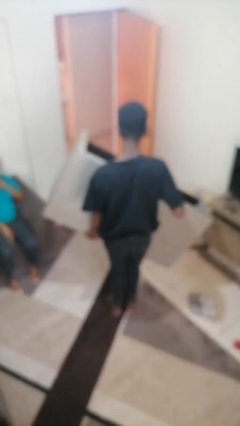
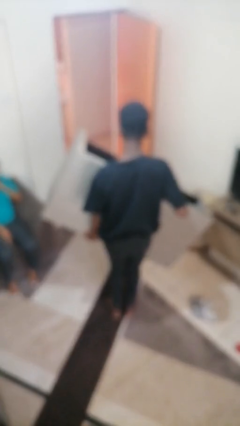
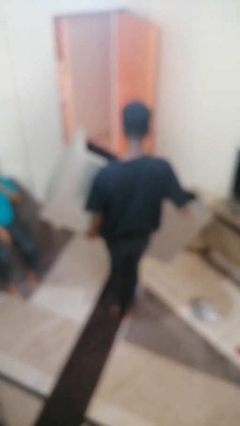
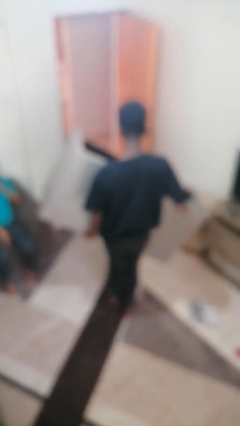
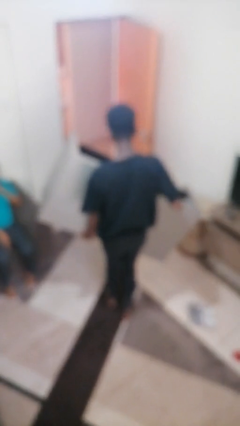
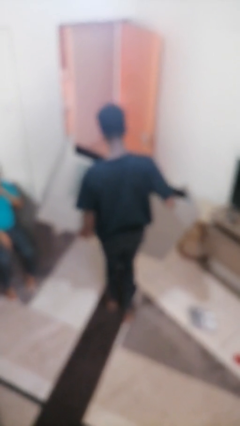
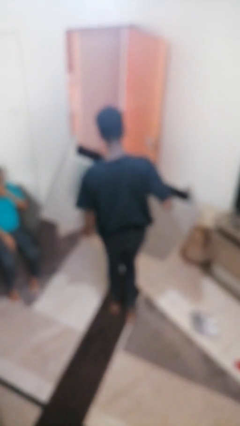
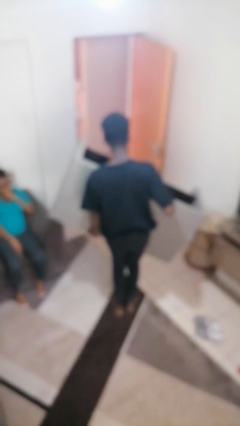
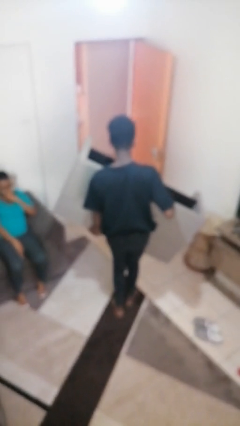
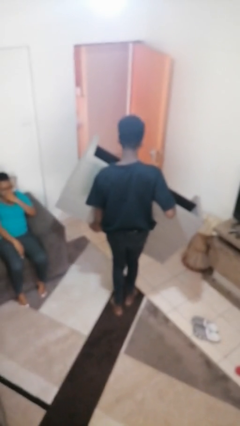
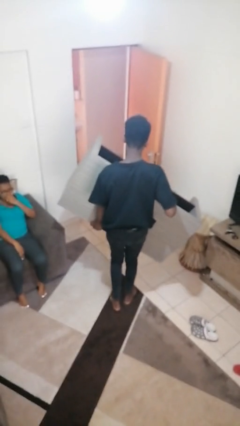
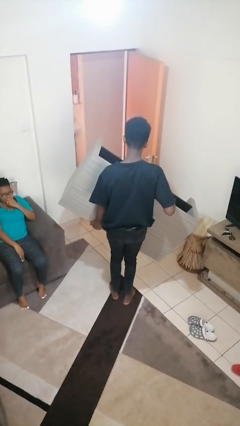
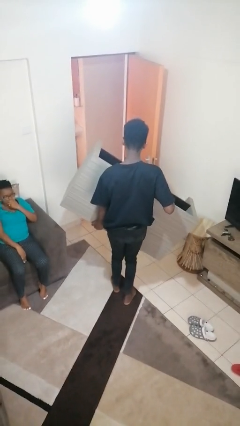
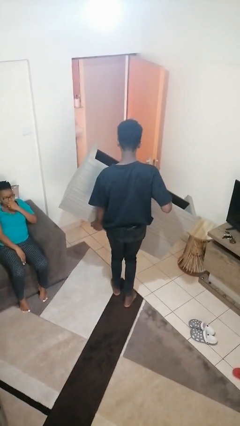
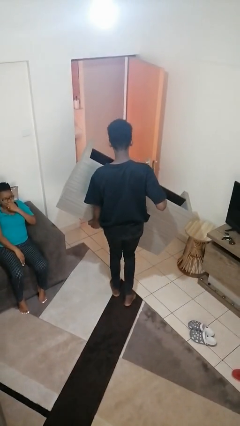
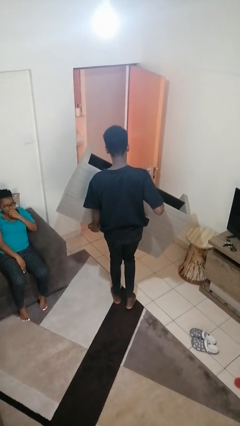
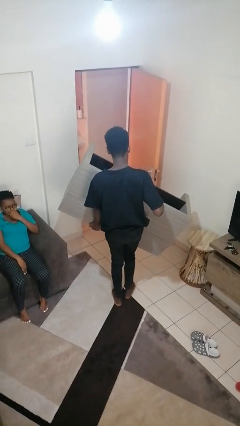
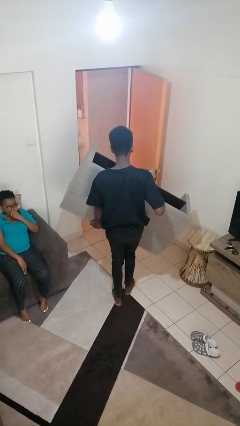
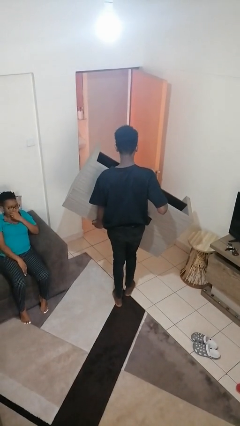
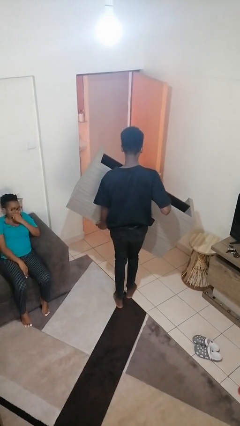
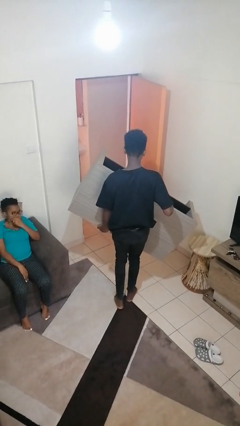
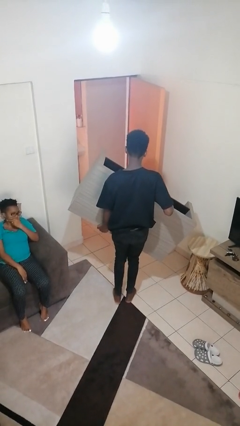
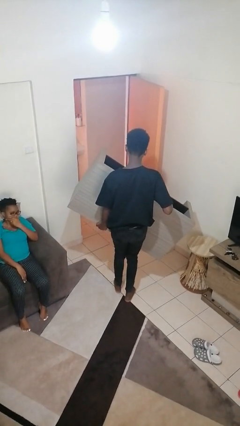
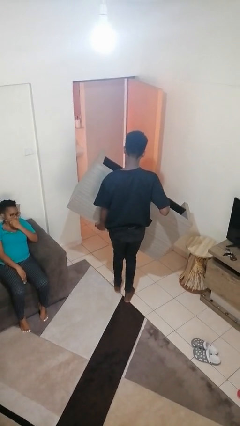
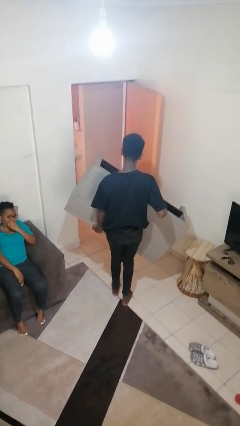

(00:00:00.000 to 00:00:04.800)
person carries furniture

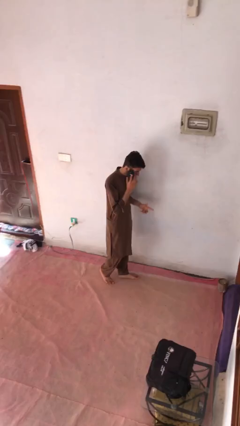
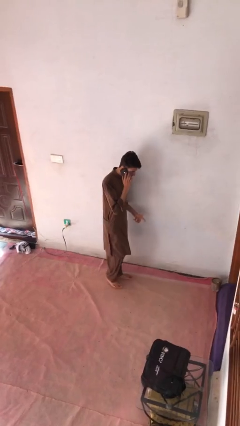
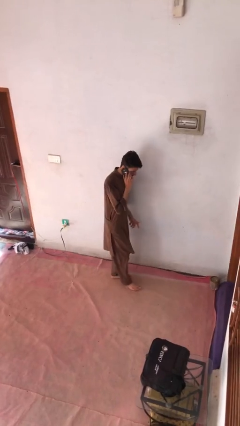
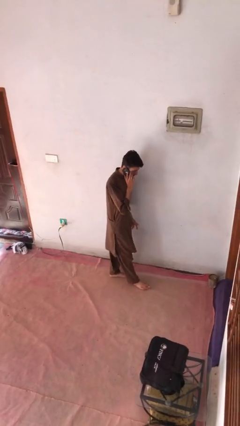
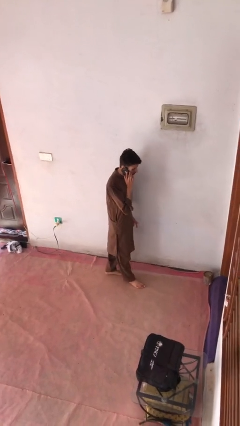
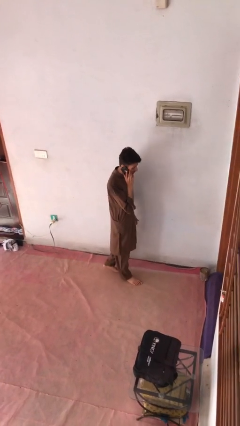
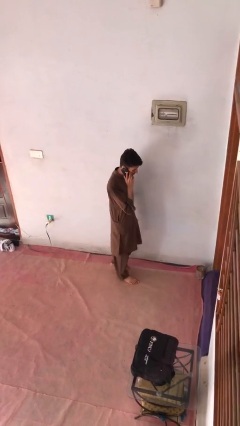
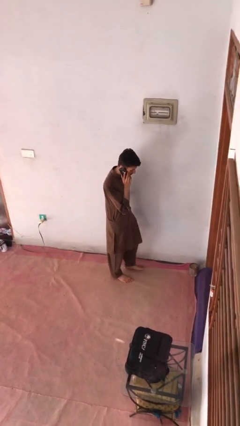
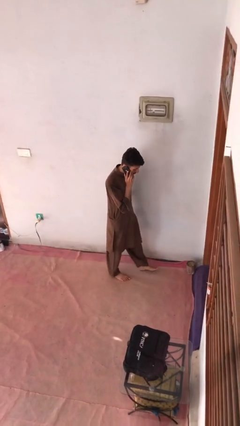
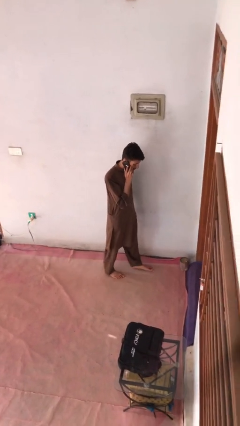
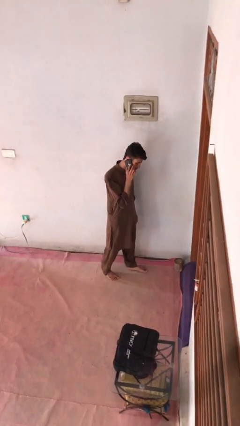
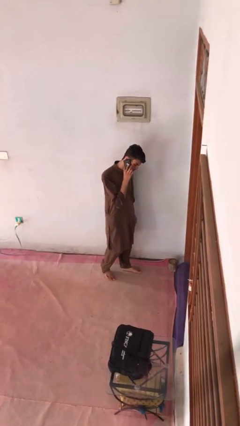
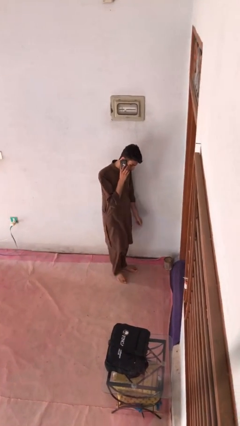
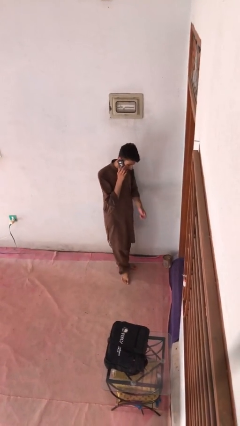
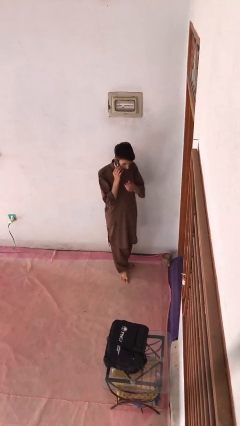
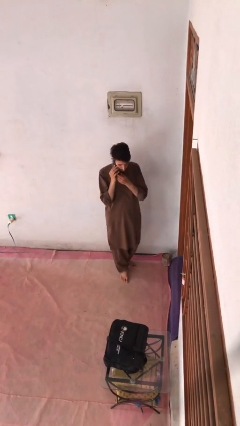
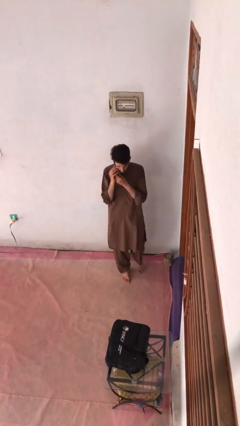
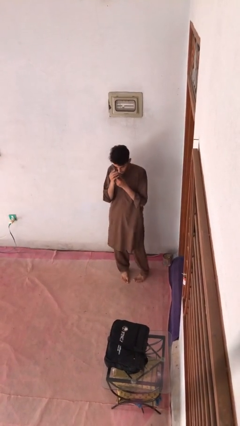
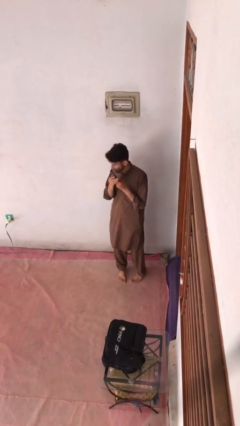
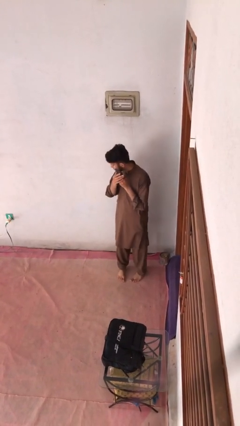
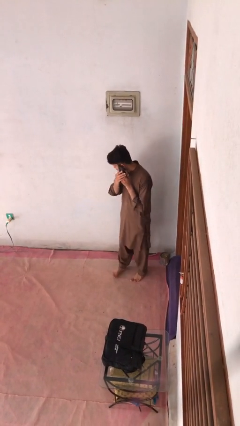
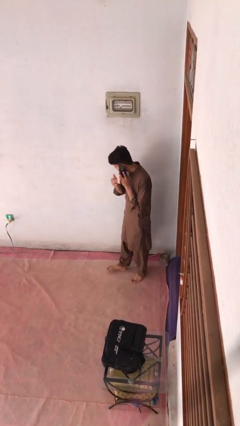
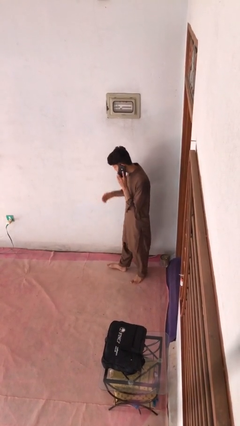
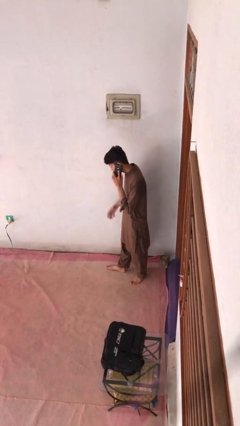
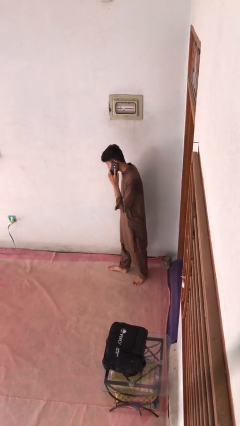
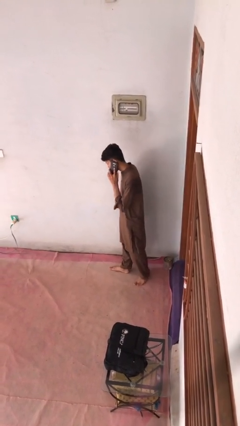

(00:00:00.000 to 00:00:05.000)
person talks on phone

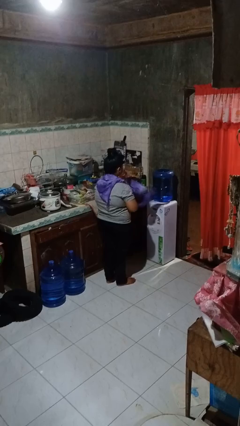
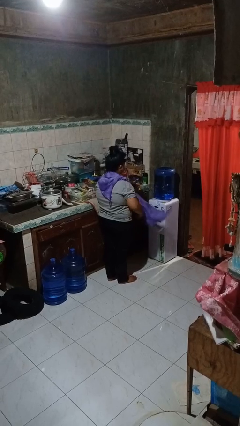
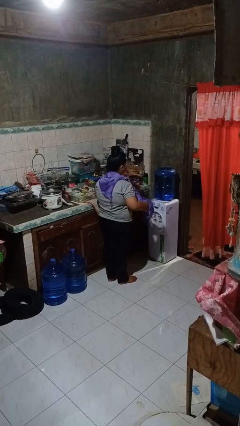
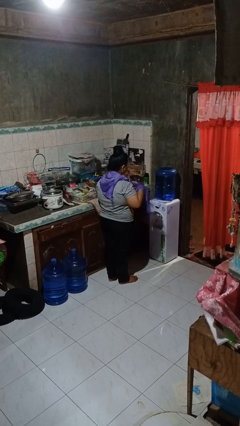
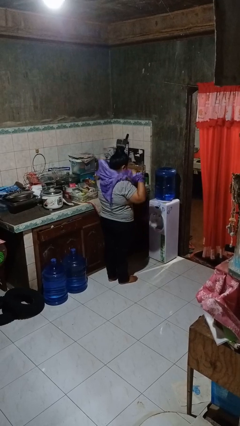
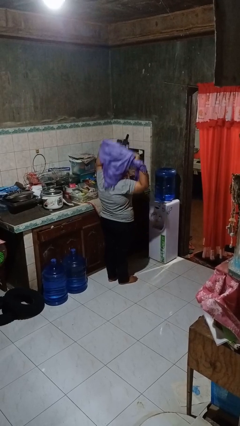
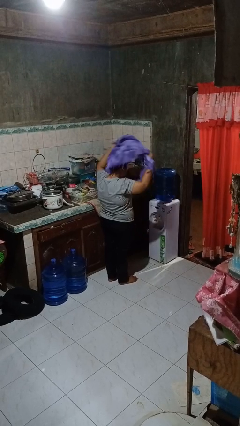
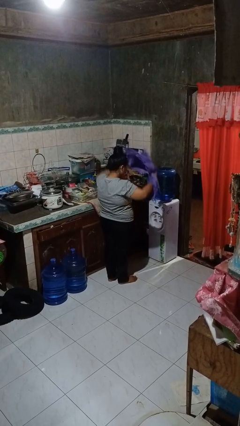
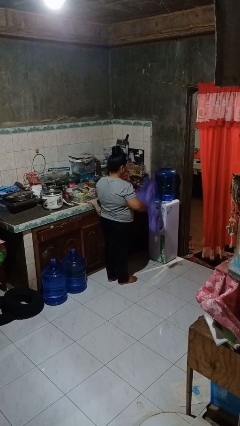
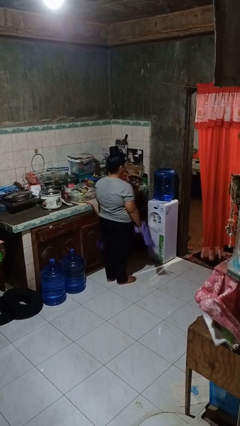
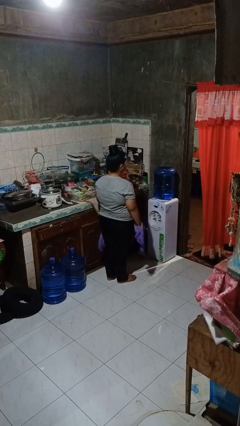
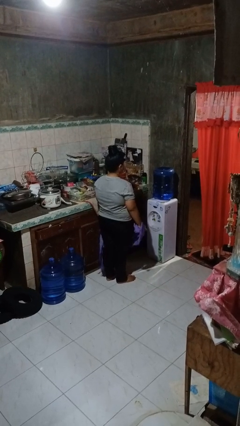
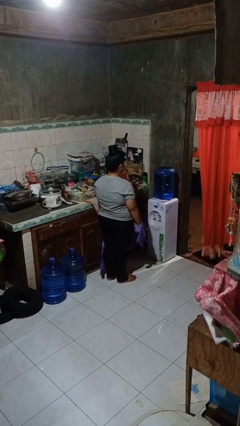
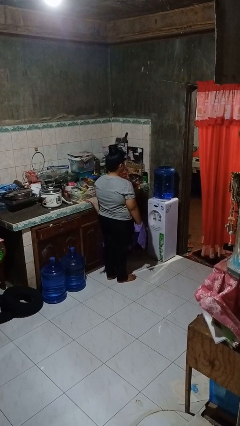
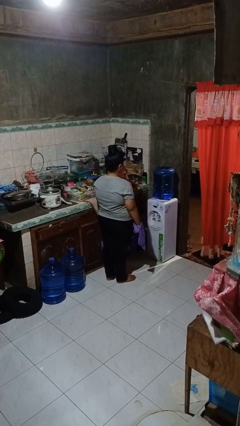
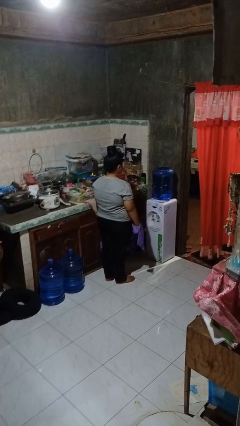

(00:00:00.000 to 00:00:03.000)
person takes off scarf

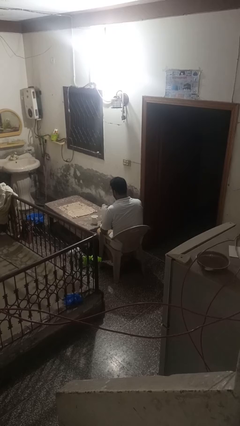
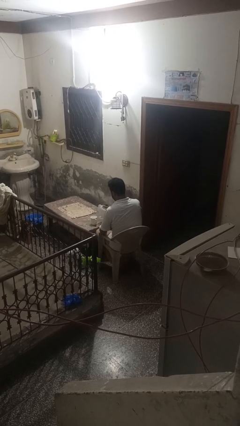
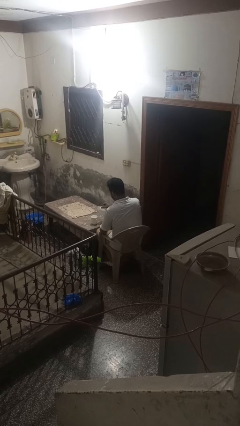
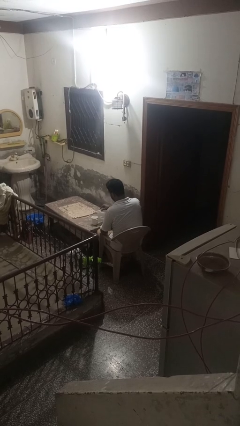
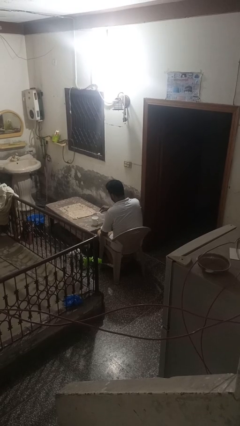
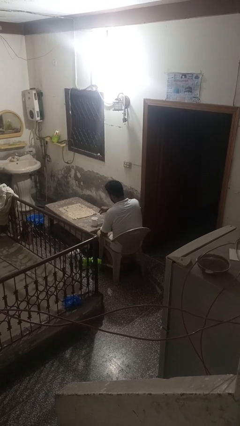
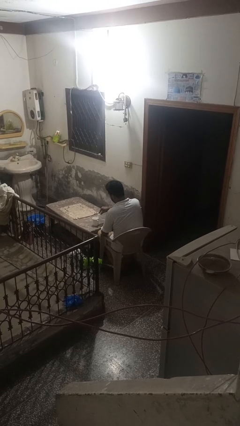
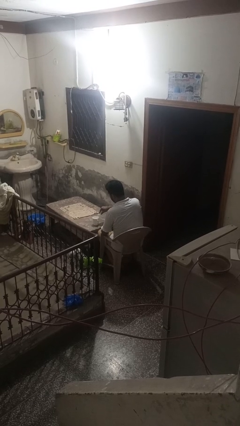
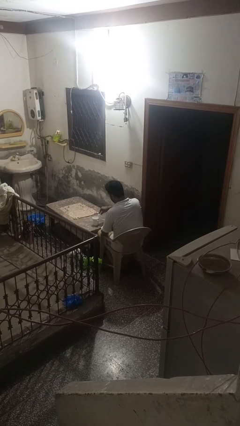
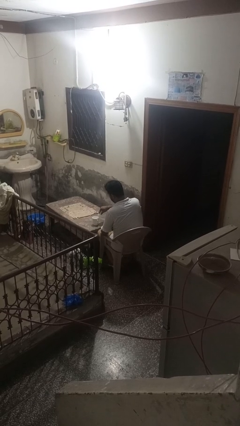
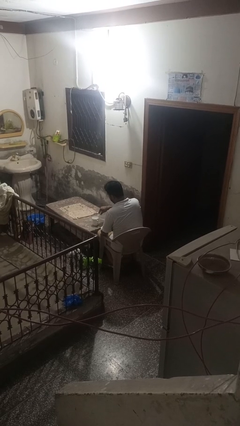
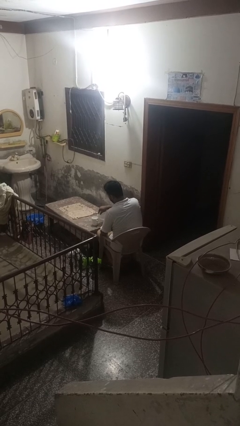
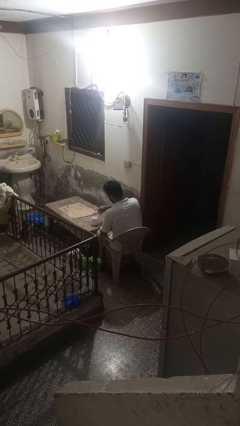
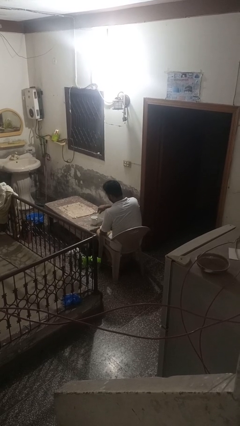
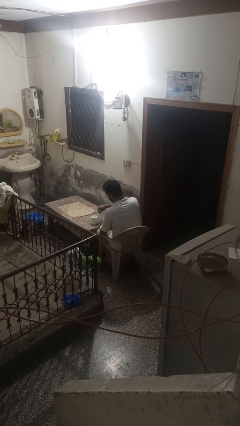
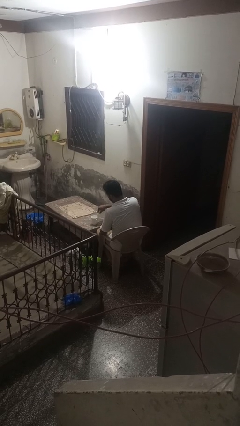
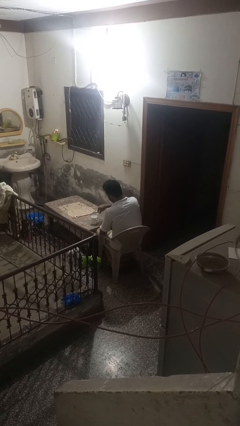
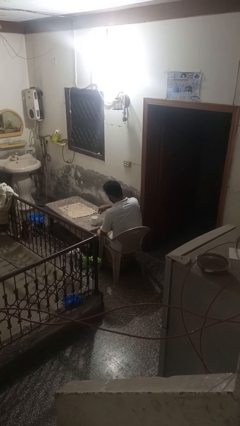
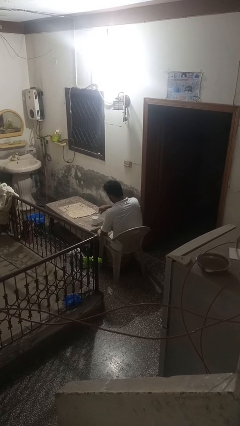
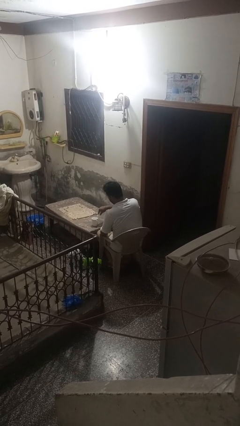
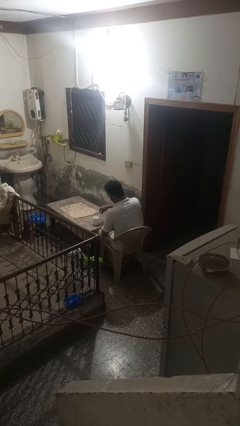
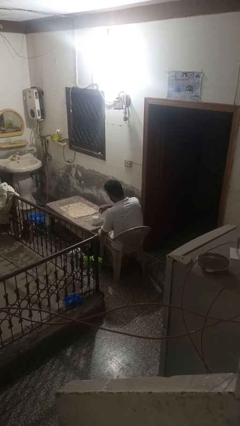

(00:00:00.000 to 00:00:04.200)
person pours liquid into cup

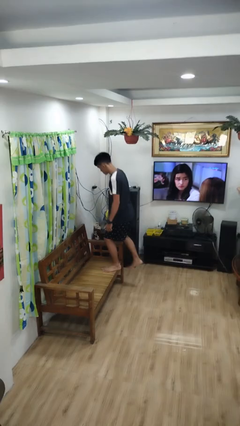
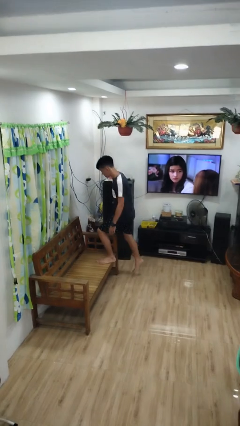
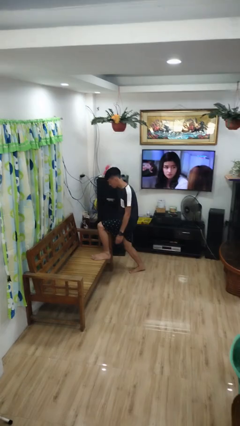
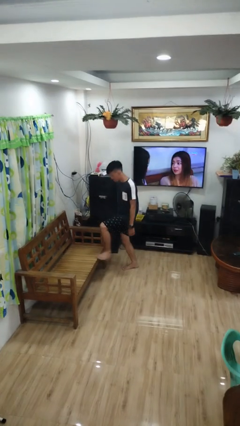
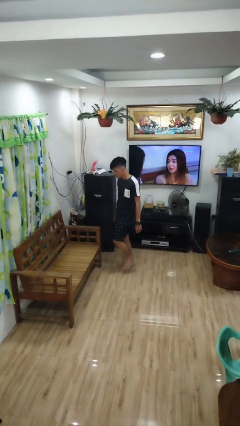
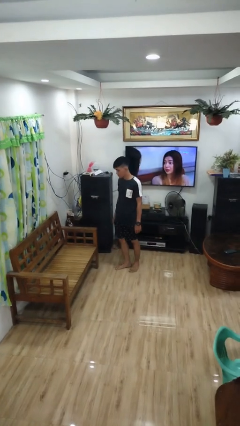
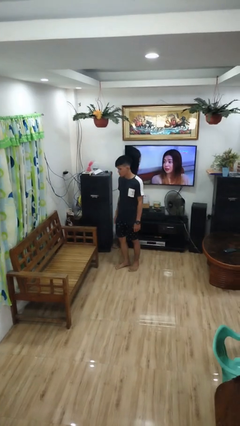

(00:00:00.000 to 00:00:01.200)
person climbs off couch
